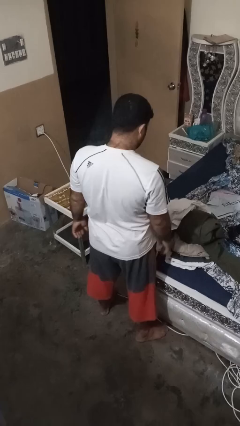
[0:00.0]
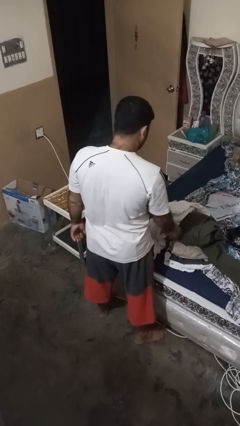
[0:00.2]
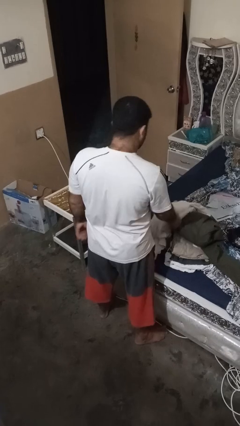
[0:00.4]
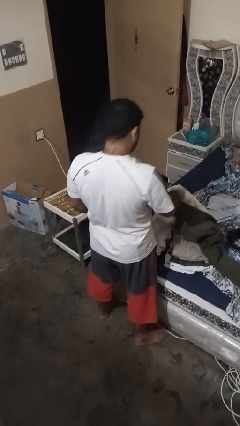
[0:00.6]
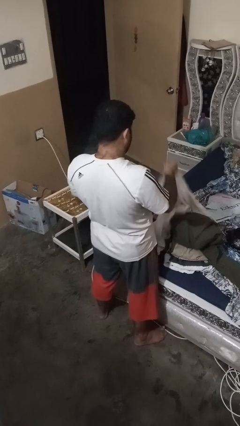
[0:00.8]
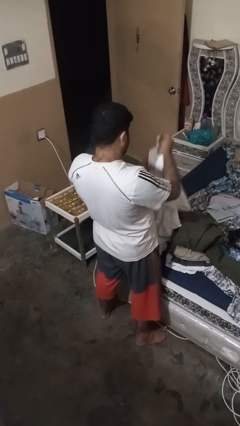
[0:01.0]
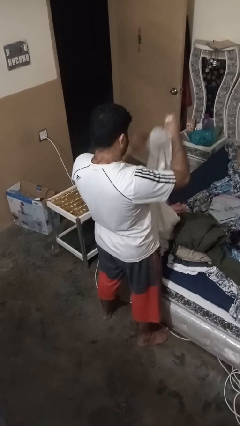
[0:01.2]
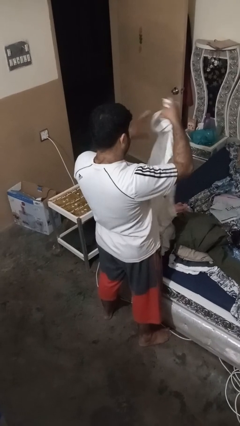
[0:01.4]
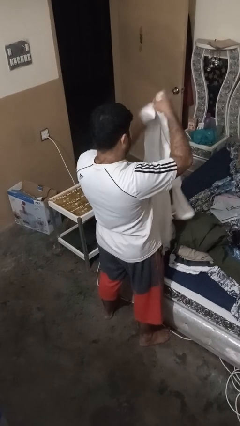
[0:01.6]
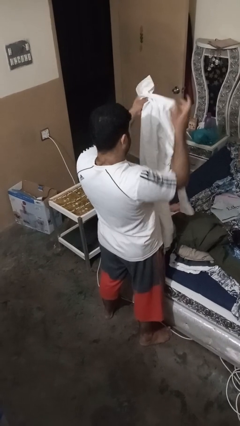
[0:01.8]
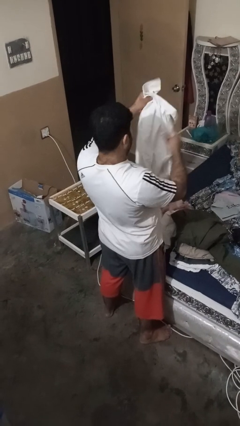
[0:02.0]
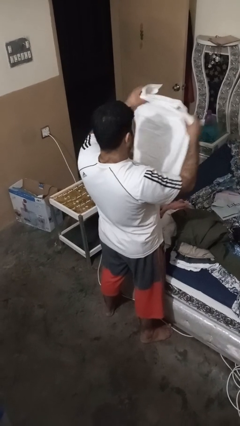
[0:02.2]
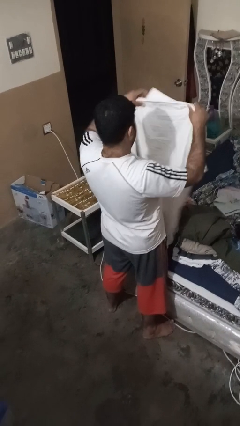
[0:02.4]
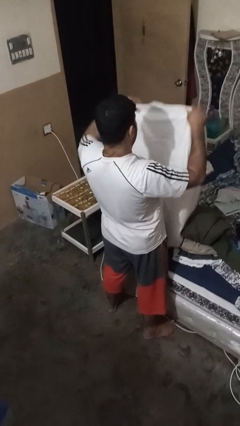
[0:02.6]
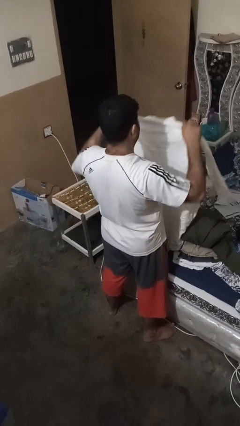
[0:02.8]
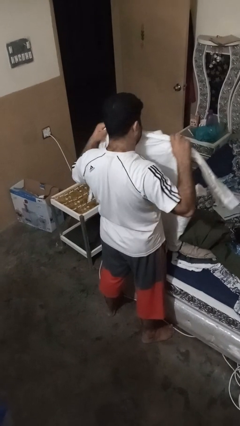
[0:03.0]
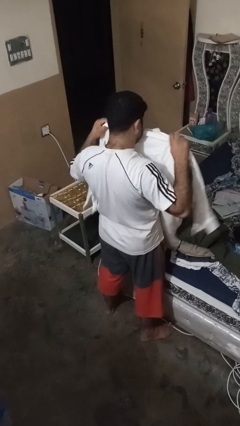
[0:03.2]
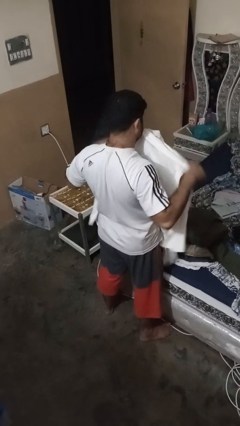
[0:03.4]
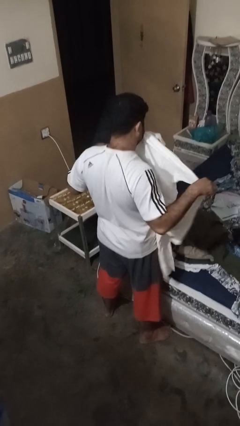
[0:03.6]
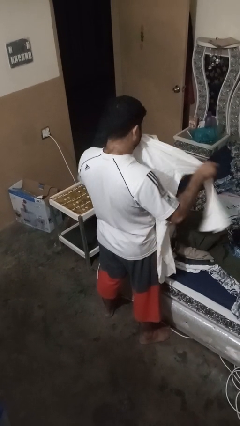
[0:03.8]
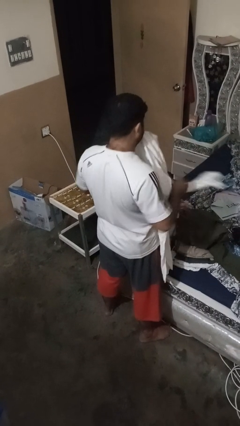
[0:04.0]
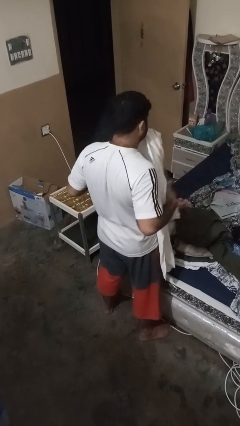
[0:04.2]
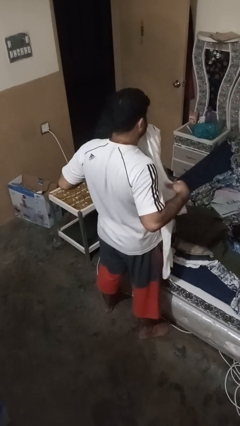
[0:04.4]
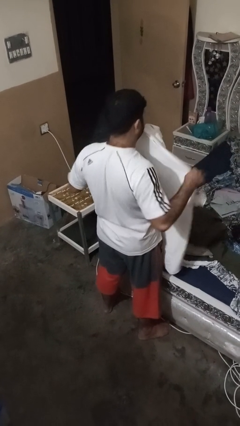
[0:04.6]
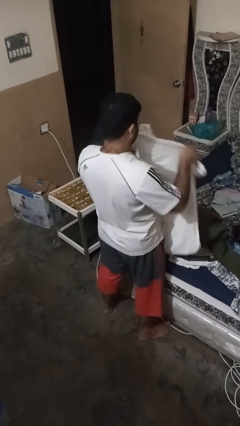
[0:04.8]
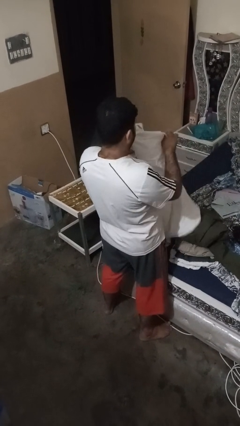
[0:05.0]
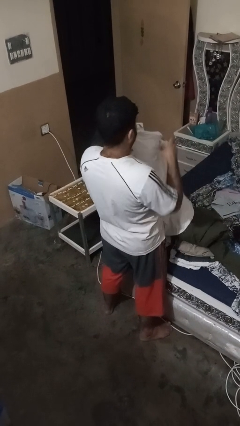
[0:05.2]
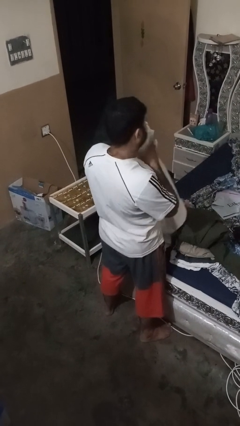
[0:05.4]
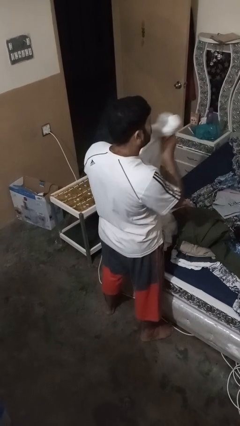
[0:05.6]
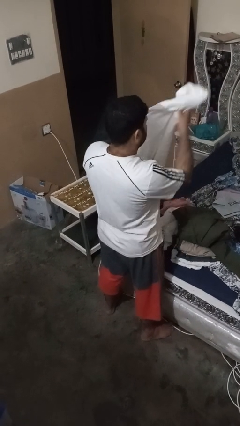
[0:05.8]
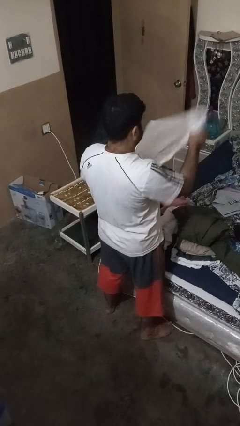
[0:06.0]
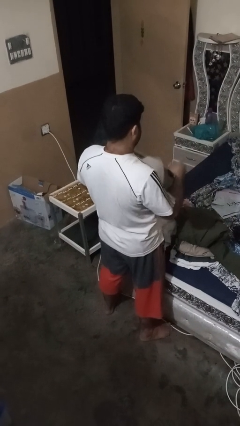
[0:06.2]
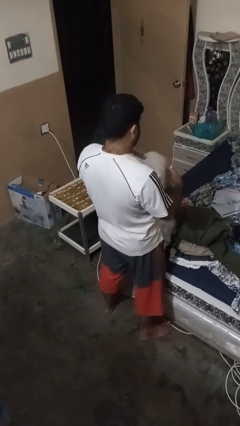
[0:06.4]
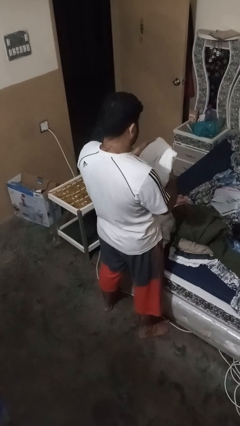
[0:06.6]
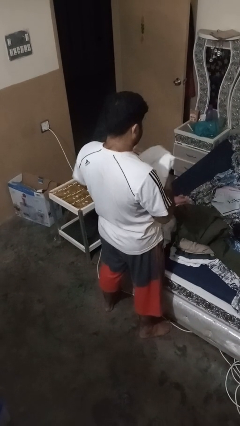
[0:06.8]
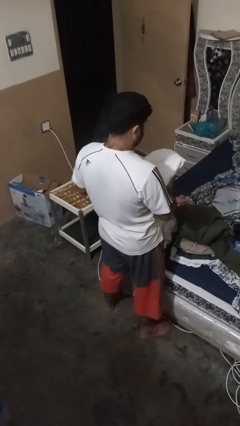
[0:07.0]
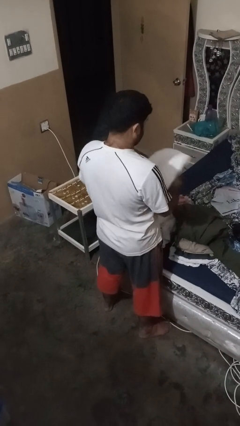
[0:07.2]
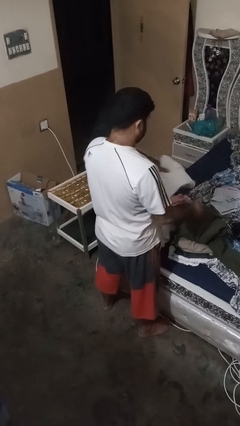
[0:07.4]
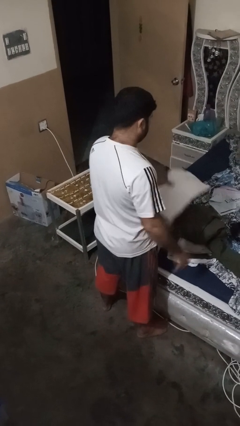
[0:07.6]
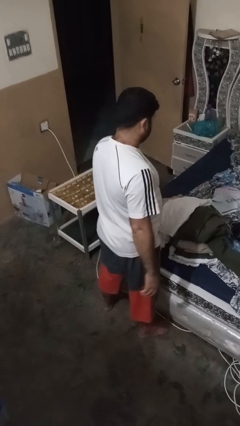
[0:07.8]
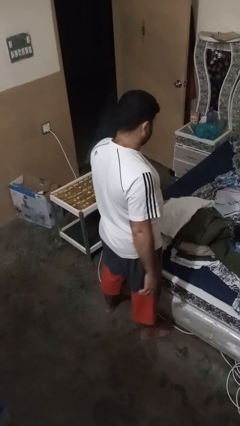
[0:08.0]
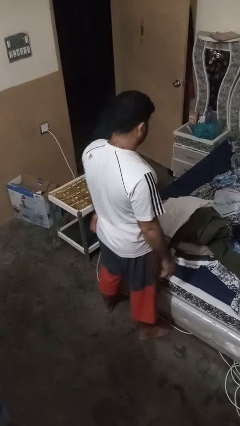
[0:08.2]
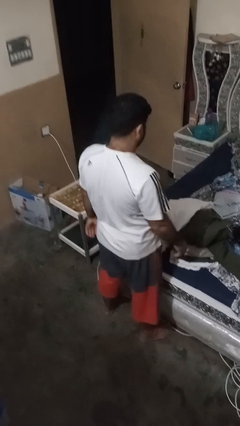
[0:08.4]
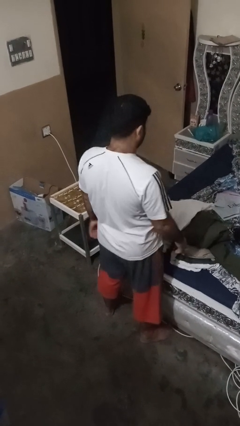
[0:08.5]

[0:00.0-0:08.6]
person folds shirt

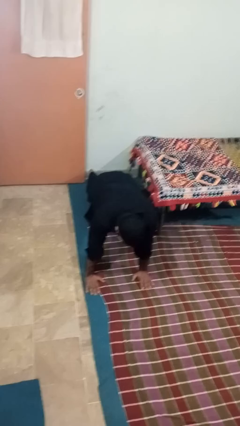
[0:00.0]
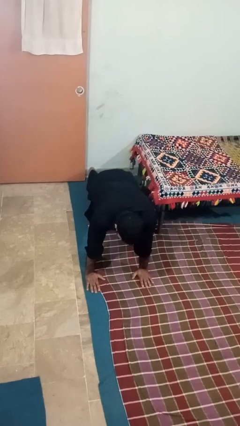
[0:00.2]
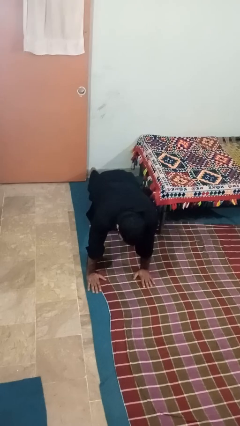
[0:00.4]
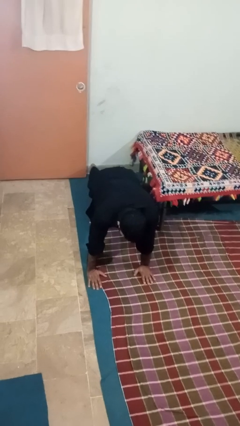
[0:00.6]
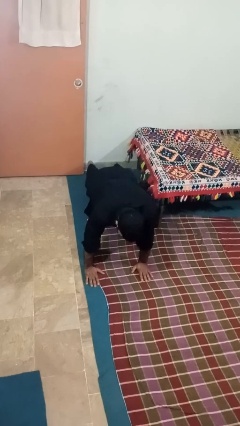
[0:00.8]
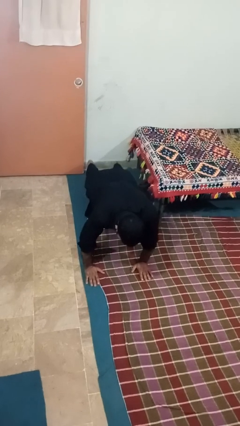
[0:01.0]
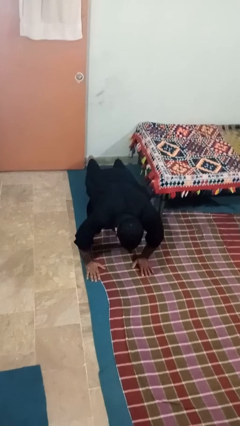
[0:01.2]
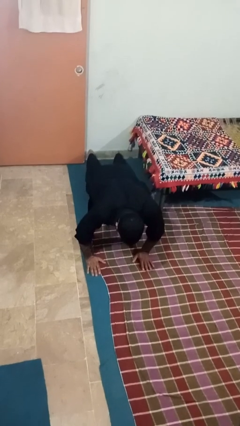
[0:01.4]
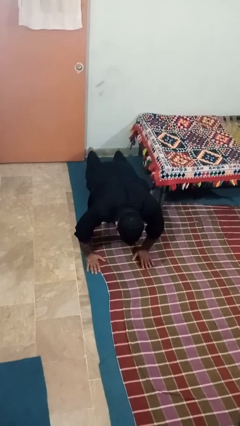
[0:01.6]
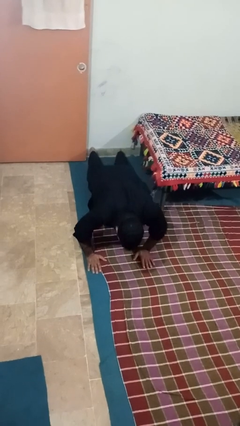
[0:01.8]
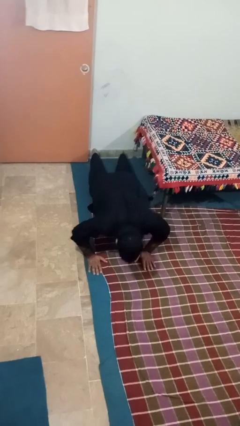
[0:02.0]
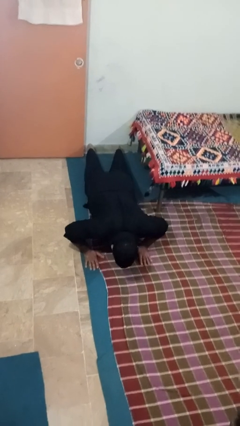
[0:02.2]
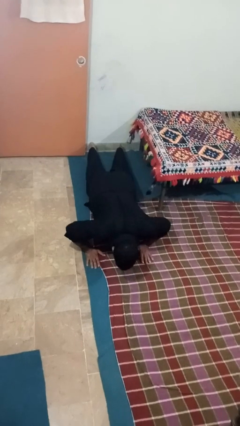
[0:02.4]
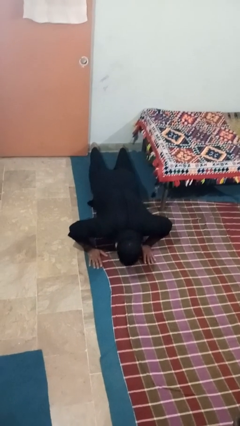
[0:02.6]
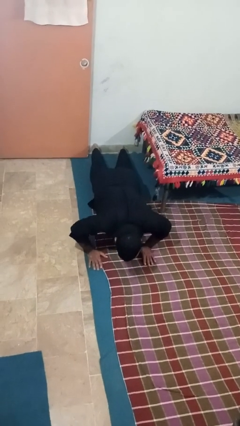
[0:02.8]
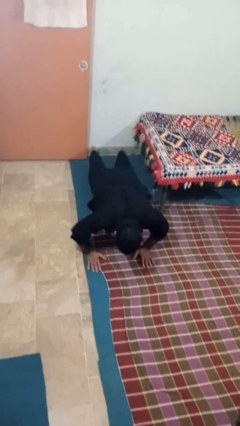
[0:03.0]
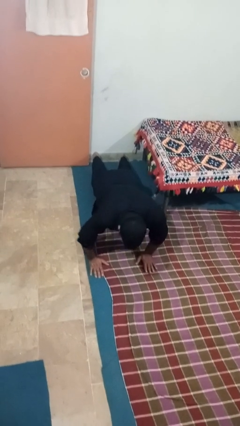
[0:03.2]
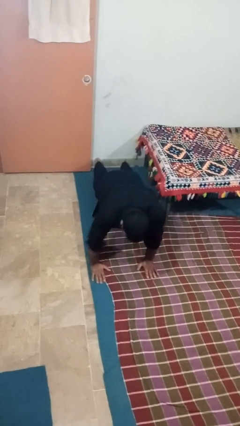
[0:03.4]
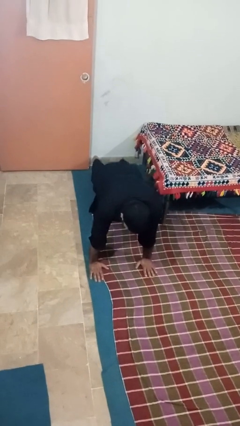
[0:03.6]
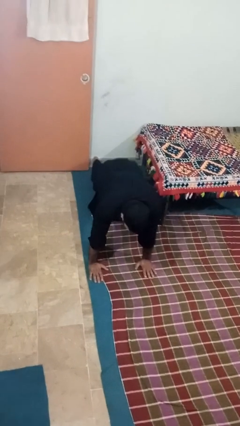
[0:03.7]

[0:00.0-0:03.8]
person exercises with pushup

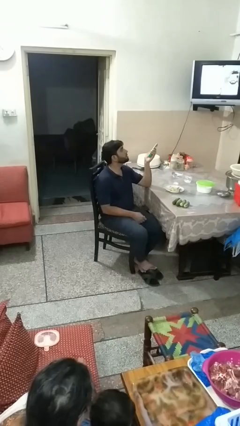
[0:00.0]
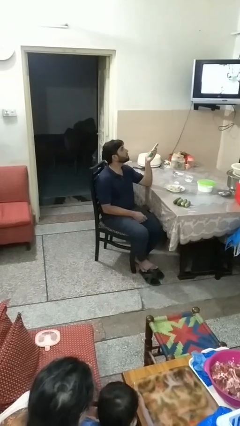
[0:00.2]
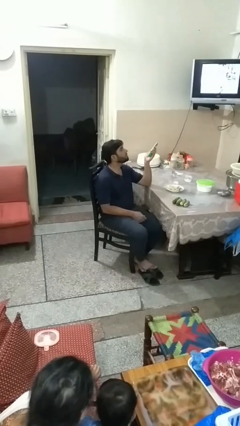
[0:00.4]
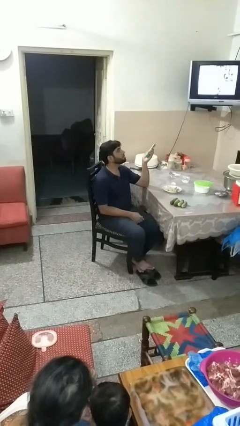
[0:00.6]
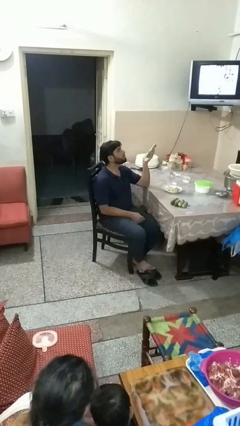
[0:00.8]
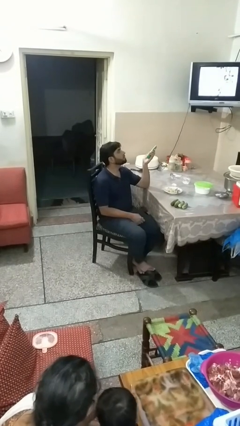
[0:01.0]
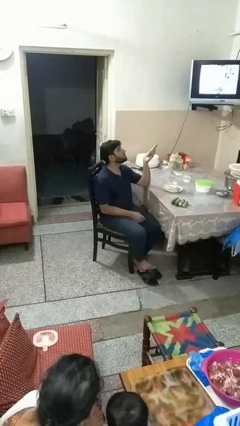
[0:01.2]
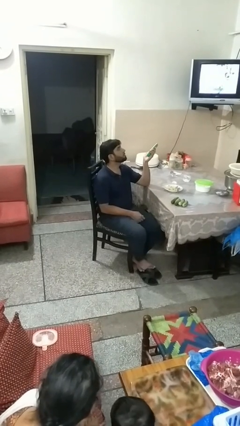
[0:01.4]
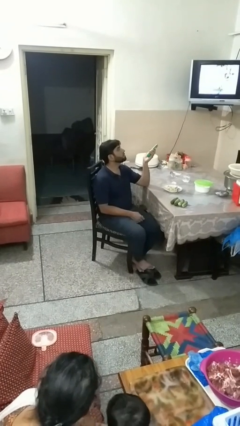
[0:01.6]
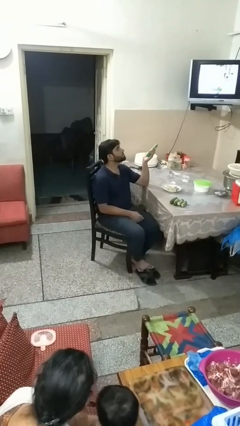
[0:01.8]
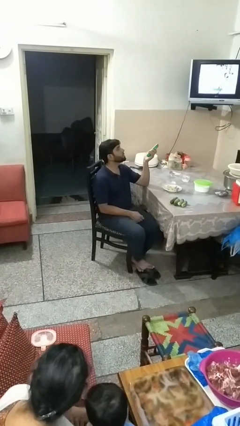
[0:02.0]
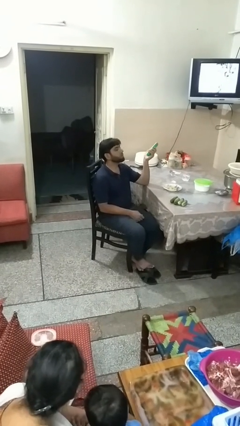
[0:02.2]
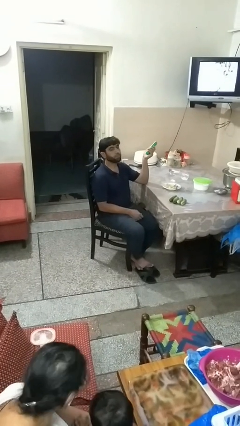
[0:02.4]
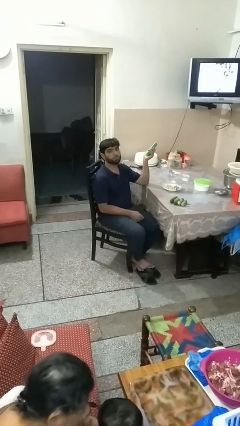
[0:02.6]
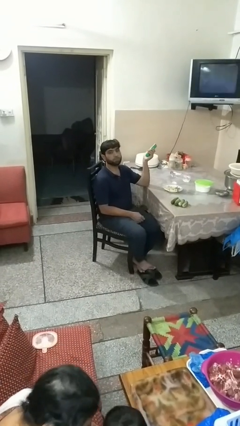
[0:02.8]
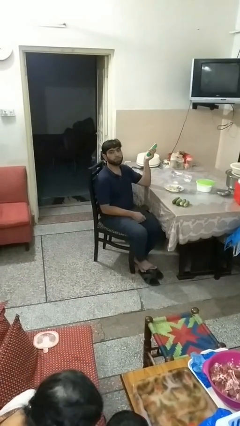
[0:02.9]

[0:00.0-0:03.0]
person uses television remote

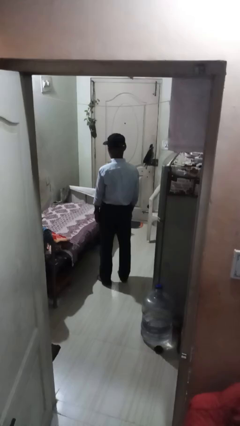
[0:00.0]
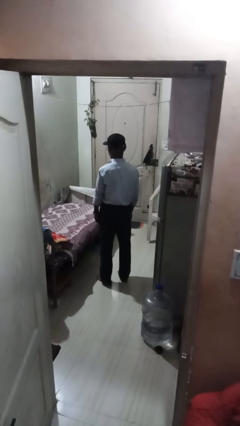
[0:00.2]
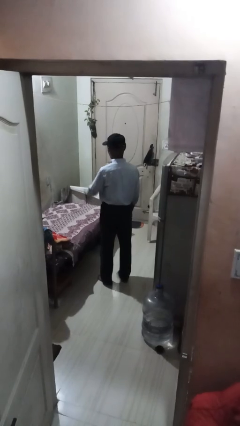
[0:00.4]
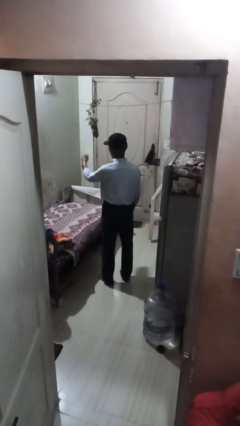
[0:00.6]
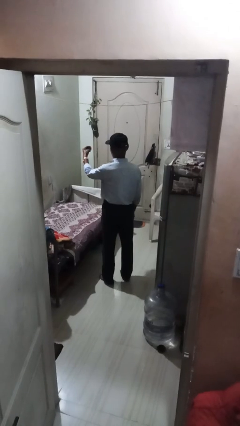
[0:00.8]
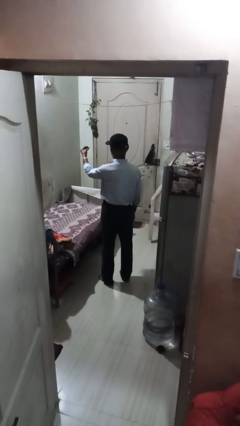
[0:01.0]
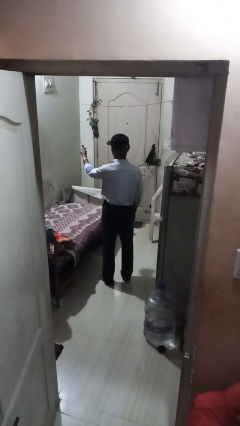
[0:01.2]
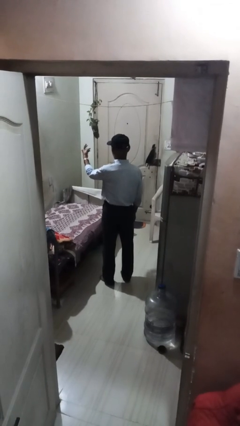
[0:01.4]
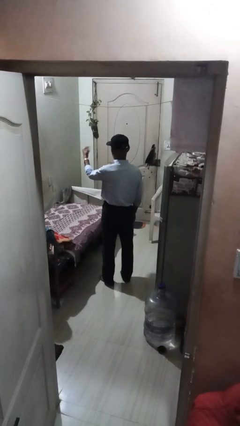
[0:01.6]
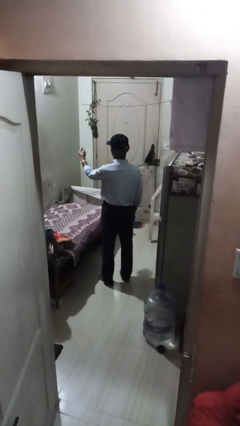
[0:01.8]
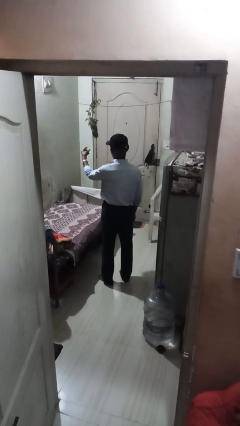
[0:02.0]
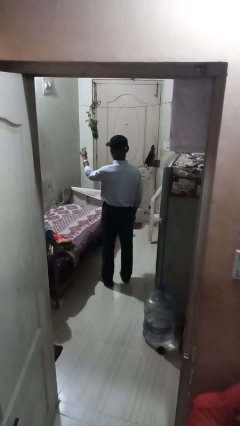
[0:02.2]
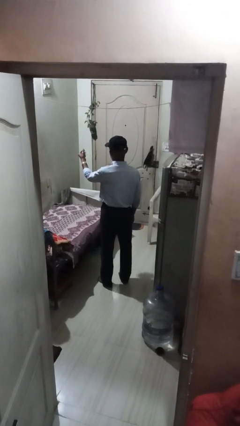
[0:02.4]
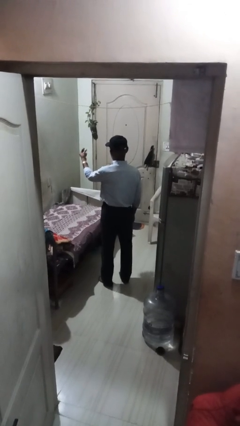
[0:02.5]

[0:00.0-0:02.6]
person snaps fingers
